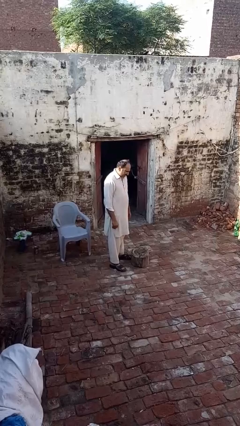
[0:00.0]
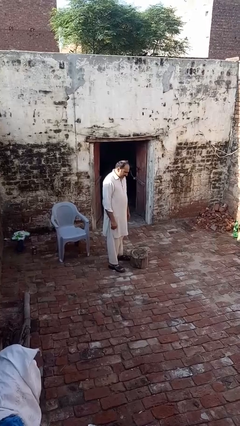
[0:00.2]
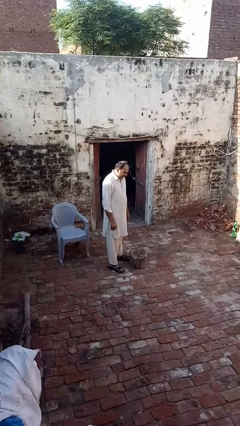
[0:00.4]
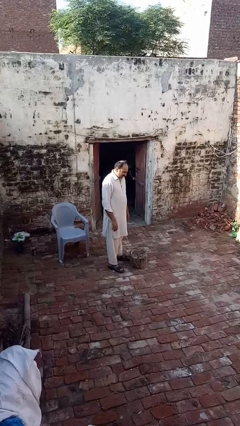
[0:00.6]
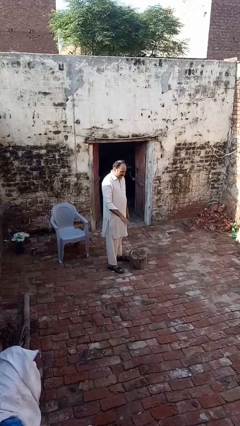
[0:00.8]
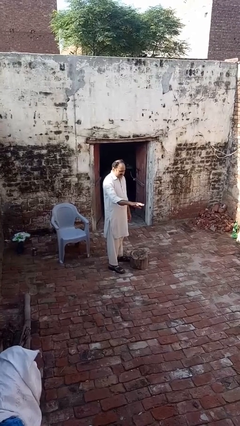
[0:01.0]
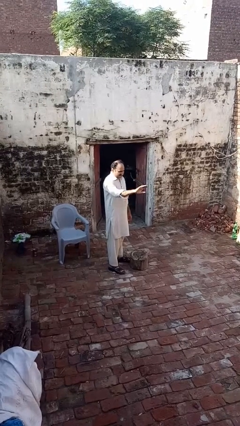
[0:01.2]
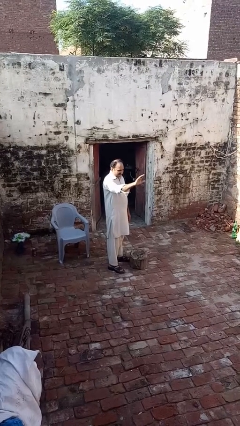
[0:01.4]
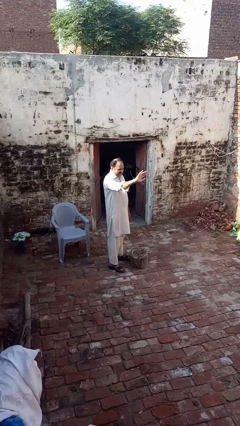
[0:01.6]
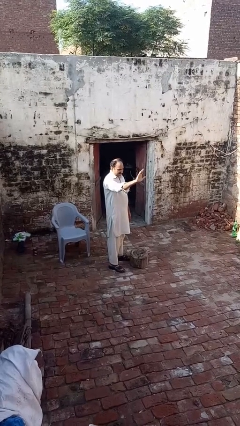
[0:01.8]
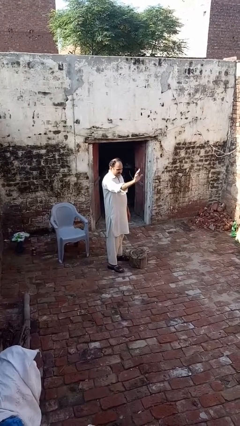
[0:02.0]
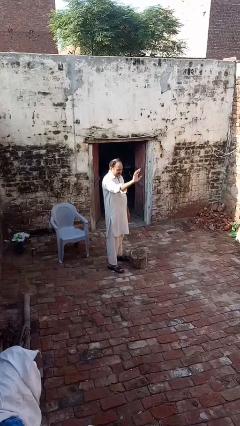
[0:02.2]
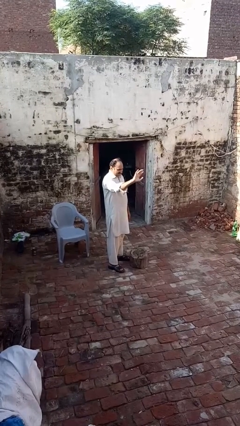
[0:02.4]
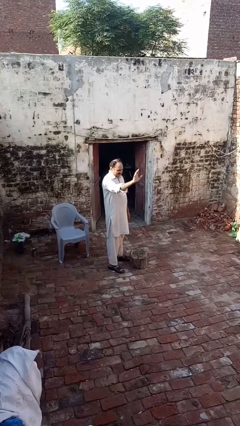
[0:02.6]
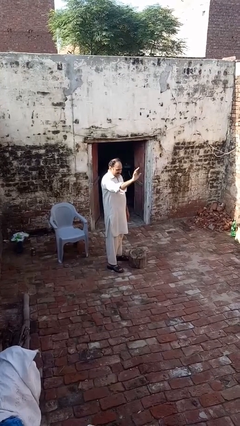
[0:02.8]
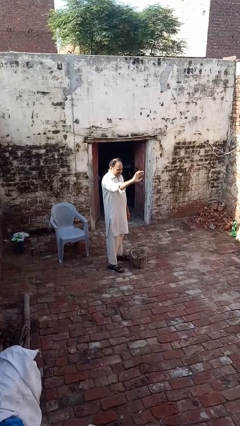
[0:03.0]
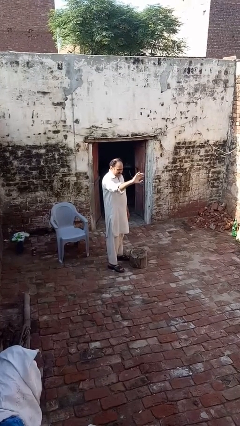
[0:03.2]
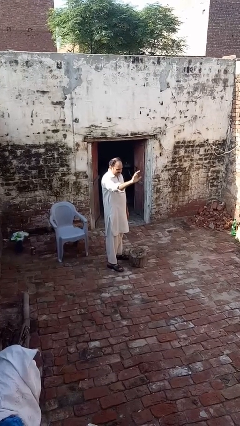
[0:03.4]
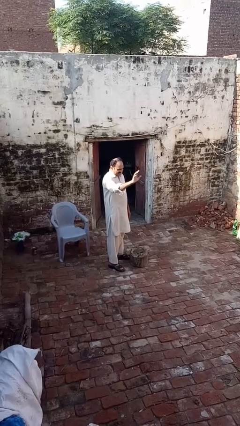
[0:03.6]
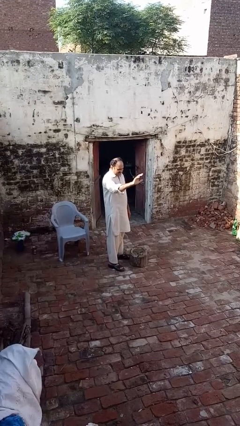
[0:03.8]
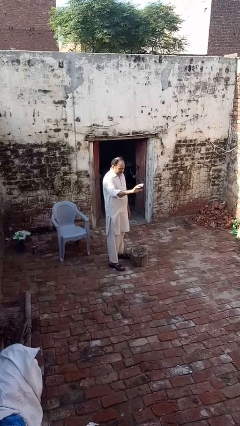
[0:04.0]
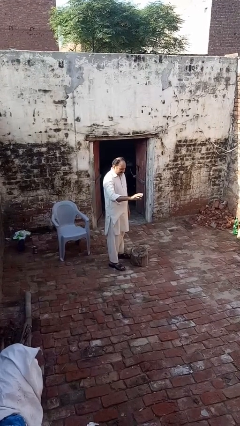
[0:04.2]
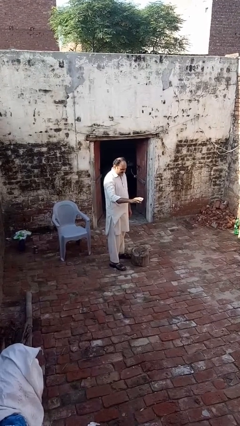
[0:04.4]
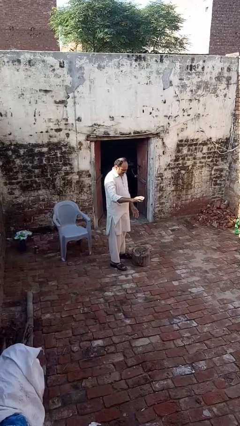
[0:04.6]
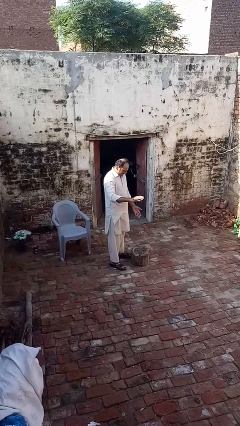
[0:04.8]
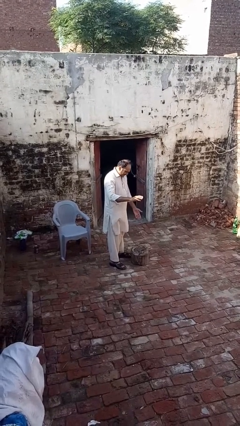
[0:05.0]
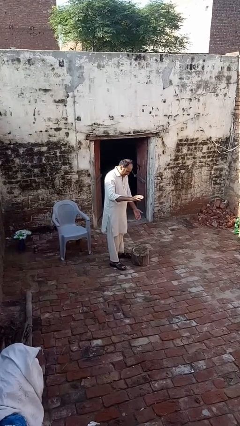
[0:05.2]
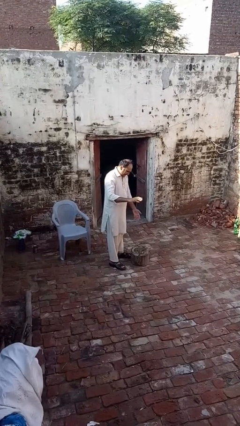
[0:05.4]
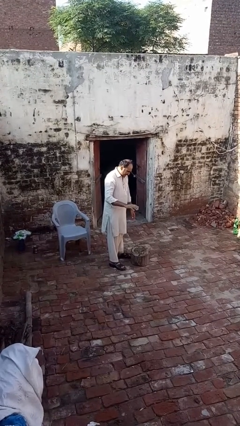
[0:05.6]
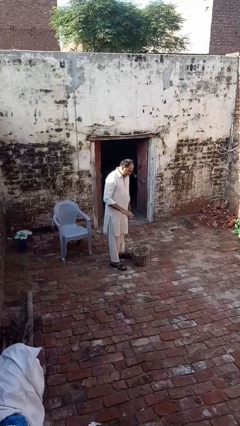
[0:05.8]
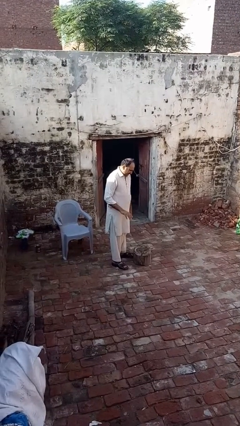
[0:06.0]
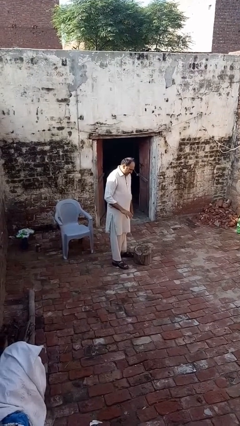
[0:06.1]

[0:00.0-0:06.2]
person waves hand over object

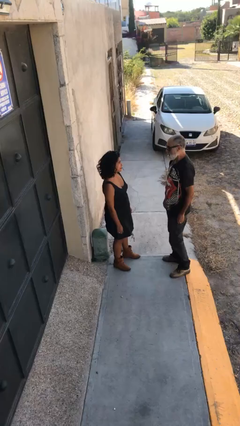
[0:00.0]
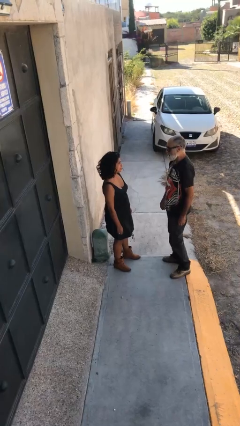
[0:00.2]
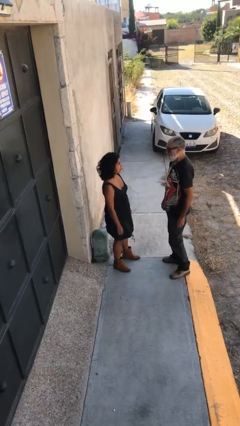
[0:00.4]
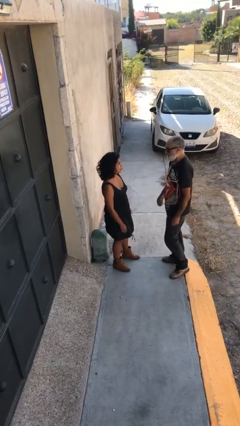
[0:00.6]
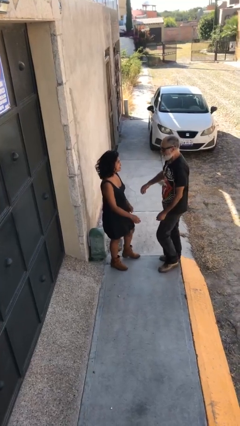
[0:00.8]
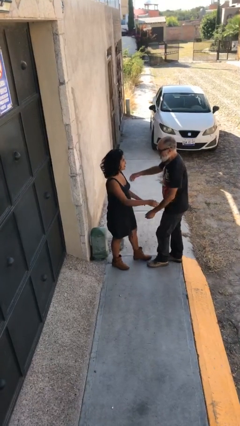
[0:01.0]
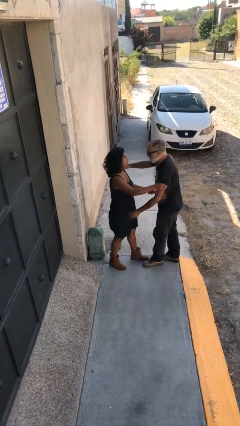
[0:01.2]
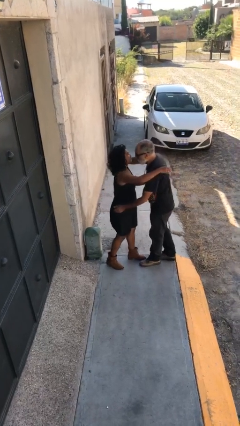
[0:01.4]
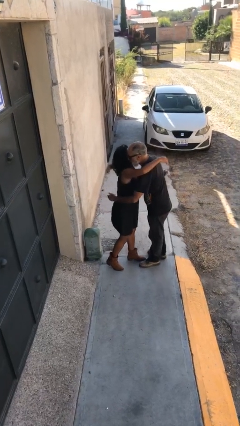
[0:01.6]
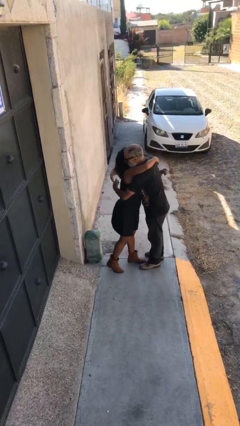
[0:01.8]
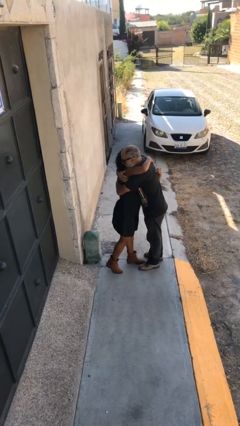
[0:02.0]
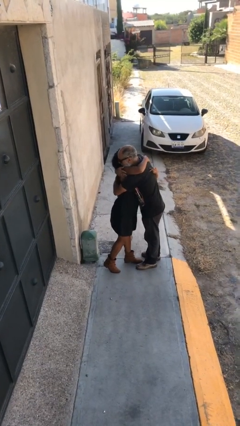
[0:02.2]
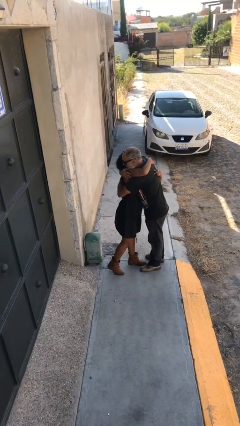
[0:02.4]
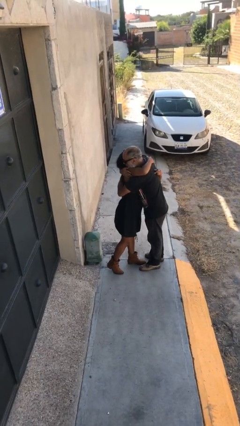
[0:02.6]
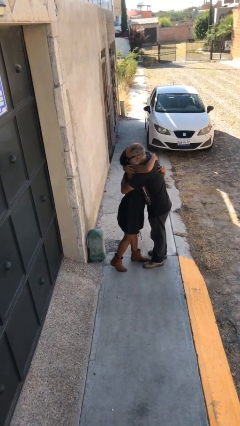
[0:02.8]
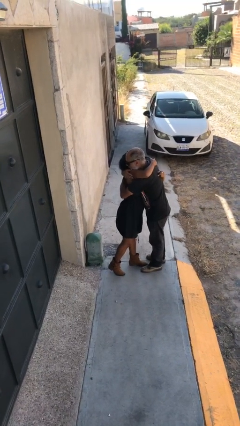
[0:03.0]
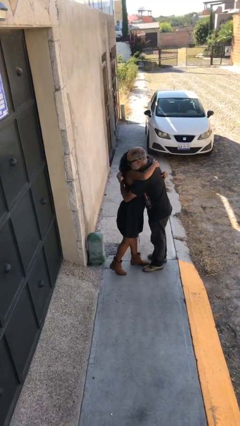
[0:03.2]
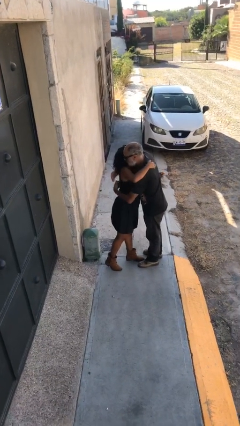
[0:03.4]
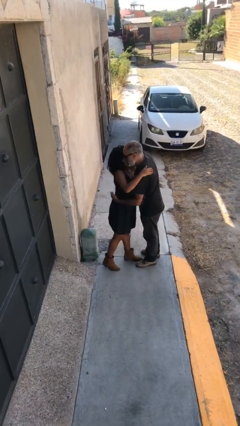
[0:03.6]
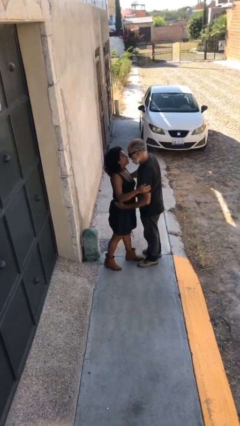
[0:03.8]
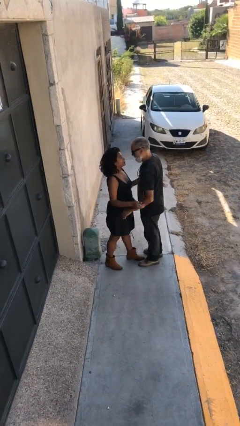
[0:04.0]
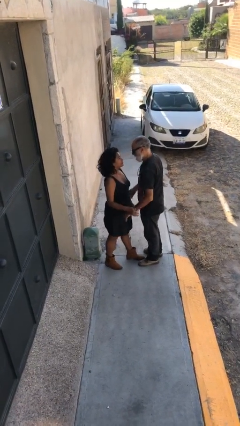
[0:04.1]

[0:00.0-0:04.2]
person embraces person

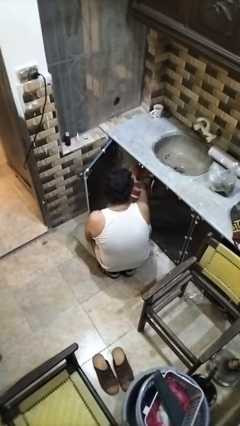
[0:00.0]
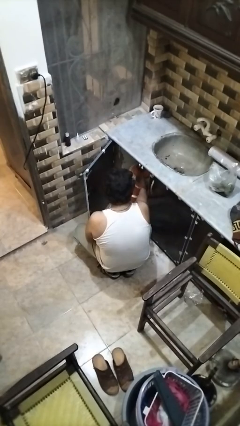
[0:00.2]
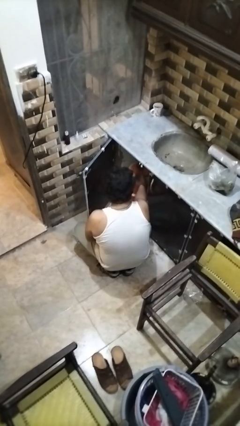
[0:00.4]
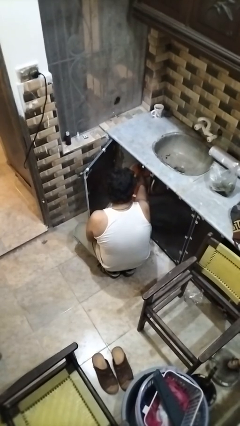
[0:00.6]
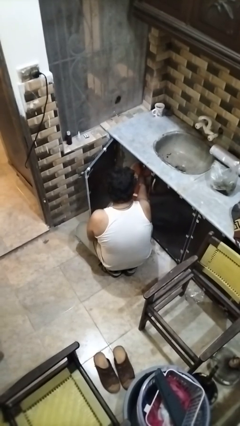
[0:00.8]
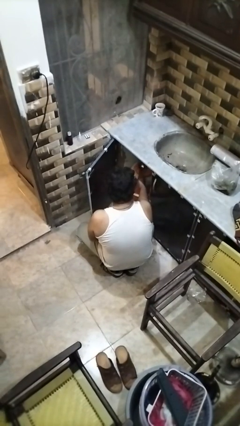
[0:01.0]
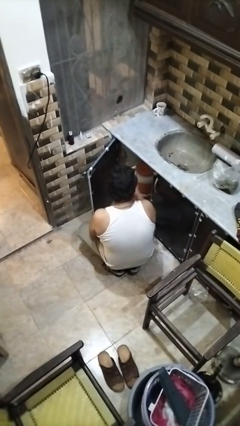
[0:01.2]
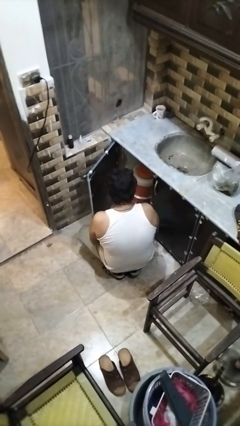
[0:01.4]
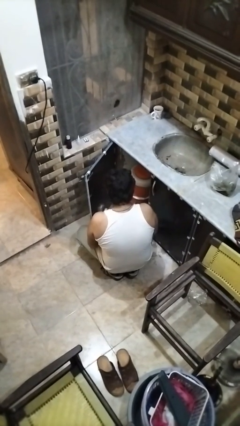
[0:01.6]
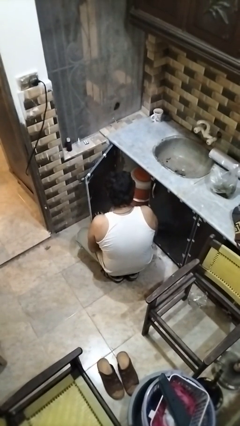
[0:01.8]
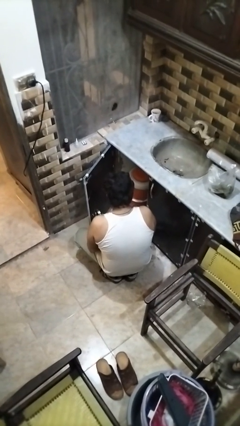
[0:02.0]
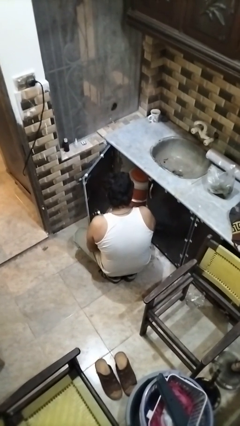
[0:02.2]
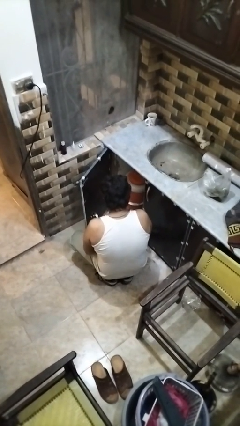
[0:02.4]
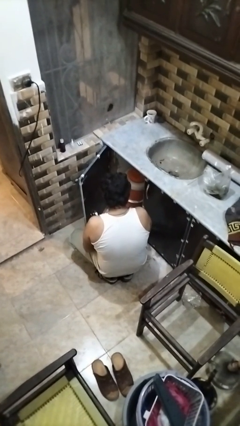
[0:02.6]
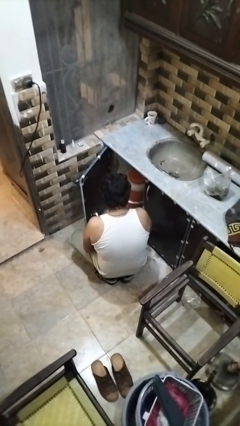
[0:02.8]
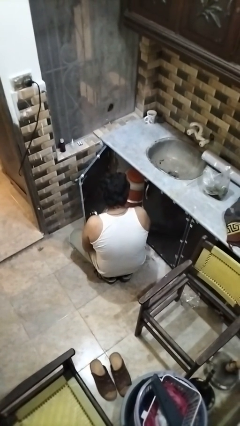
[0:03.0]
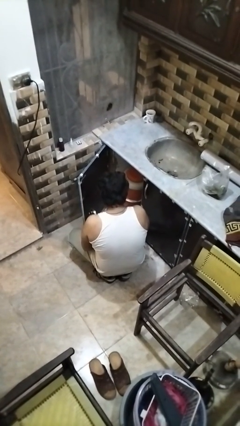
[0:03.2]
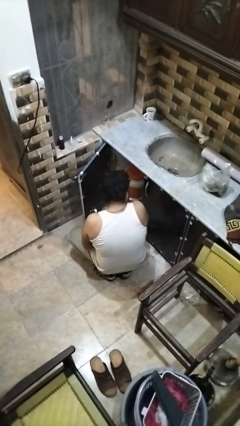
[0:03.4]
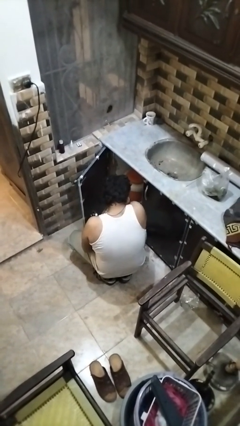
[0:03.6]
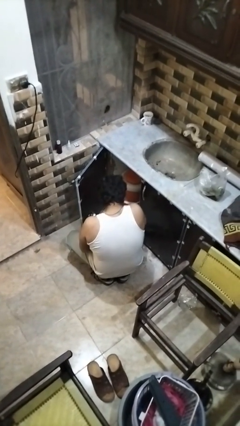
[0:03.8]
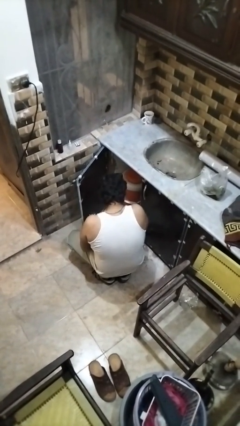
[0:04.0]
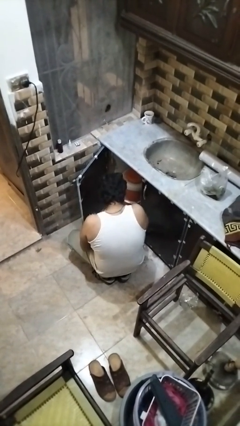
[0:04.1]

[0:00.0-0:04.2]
person takes object from kitchen drawer

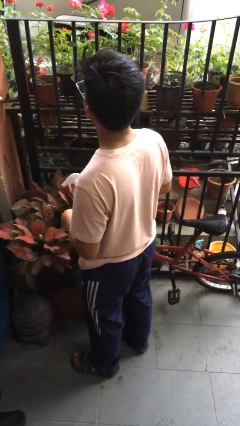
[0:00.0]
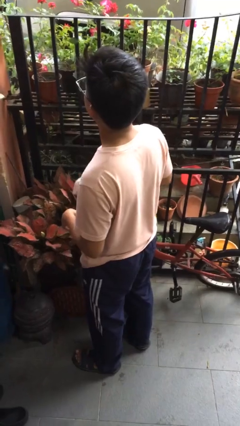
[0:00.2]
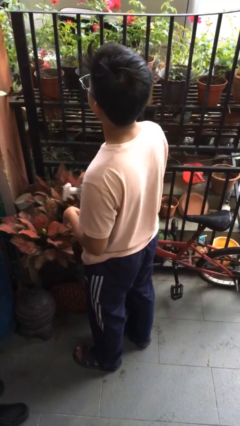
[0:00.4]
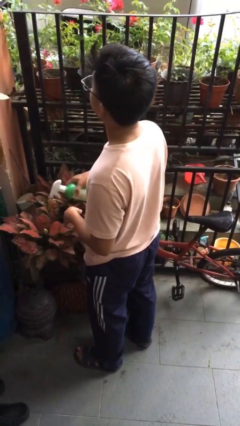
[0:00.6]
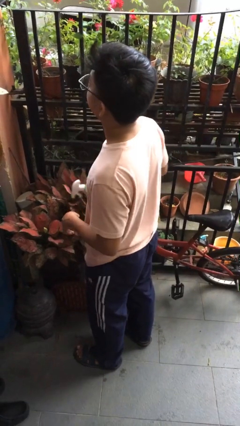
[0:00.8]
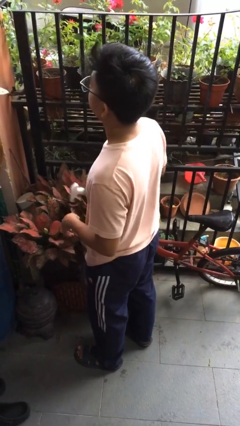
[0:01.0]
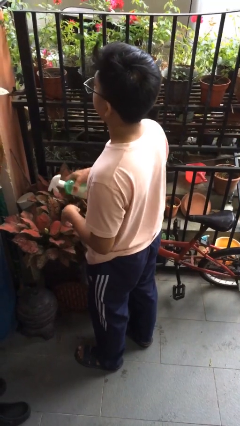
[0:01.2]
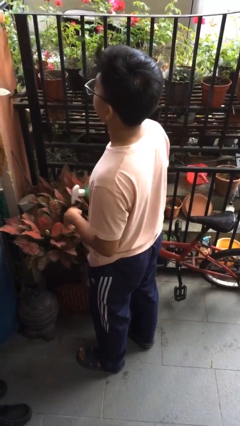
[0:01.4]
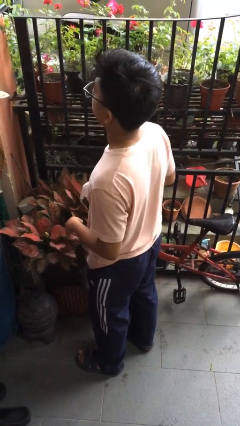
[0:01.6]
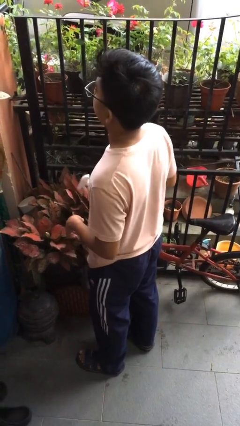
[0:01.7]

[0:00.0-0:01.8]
person waters houseplant

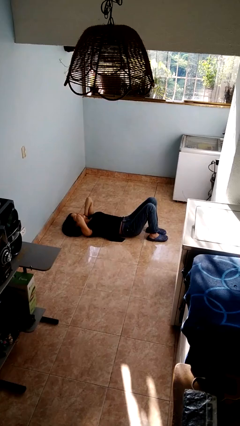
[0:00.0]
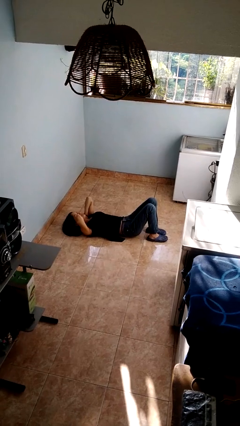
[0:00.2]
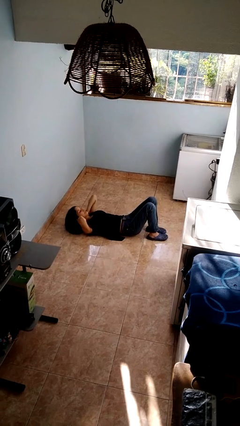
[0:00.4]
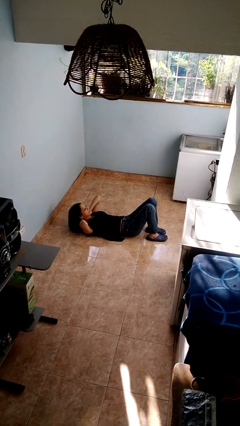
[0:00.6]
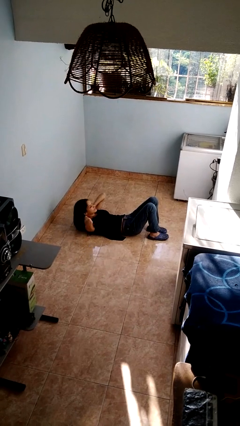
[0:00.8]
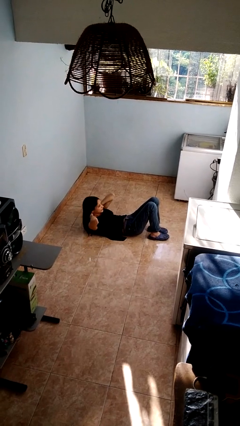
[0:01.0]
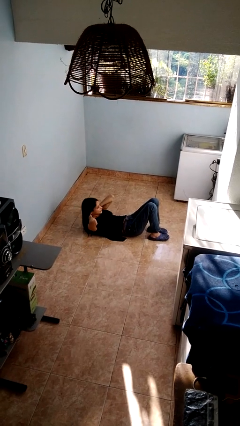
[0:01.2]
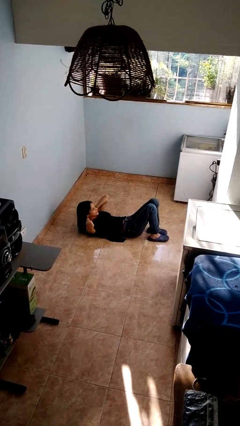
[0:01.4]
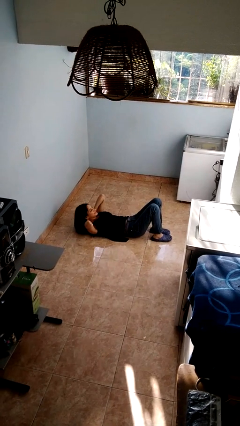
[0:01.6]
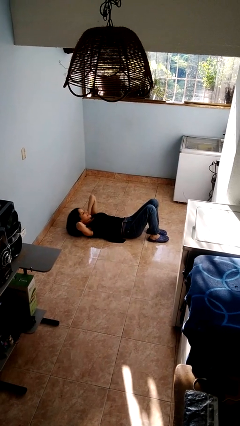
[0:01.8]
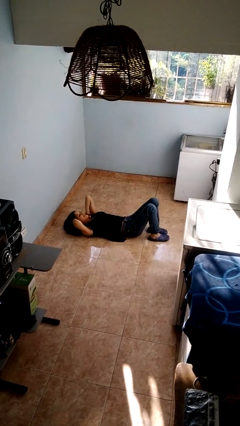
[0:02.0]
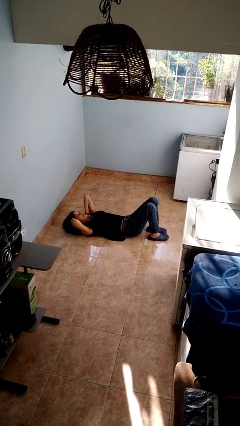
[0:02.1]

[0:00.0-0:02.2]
person exercises with situp
